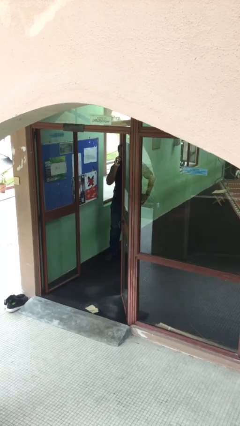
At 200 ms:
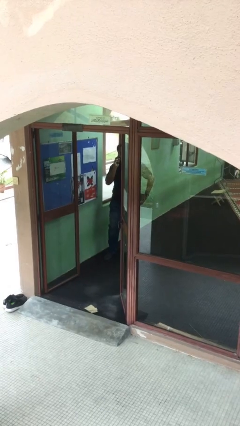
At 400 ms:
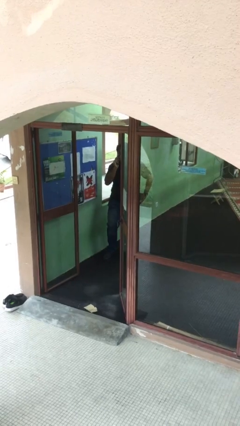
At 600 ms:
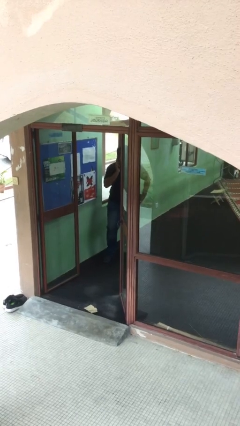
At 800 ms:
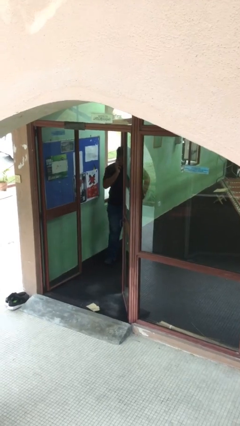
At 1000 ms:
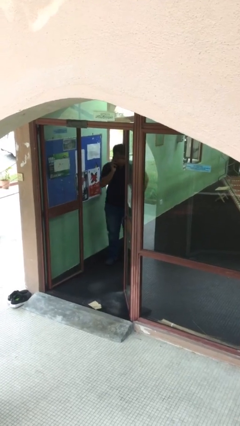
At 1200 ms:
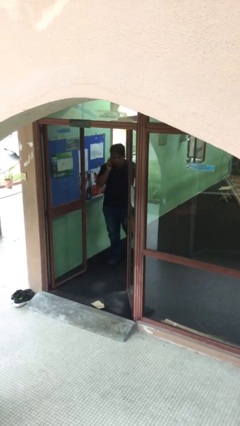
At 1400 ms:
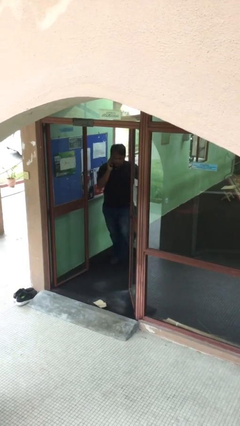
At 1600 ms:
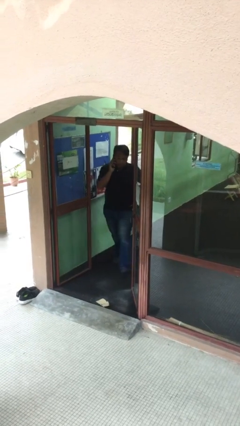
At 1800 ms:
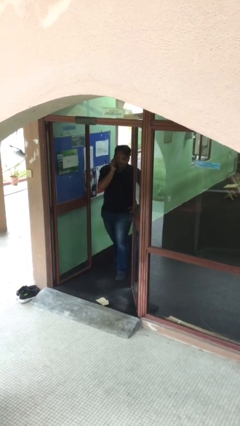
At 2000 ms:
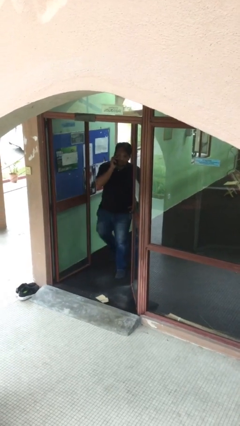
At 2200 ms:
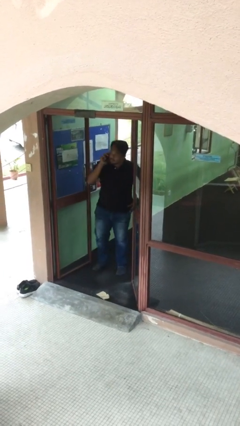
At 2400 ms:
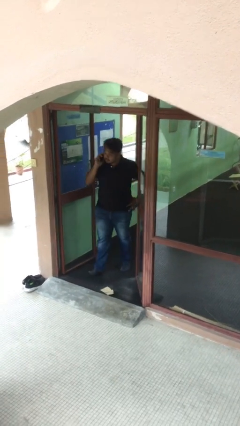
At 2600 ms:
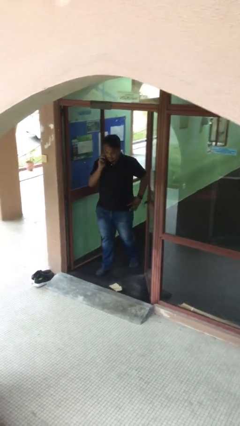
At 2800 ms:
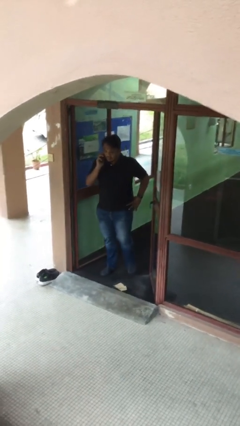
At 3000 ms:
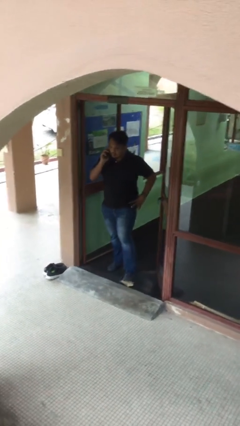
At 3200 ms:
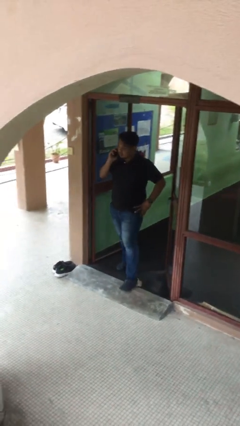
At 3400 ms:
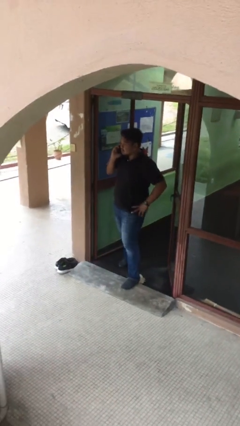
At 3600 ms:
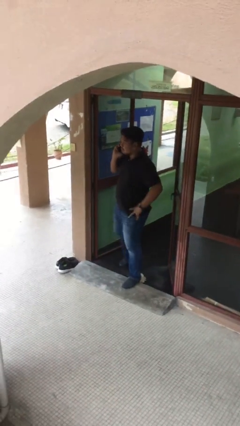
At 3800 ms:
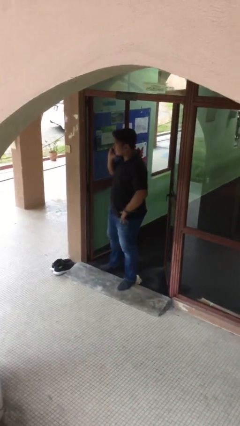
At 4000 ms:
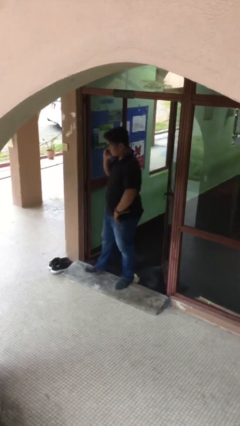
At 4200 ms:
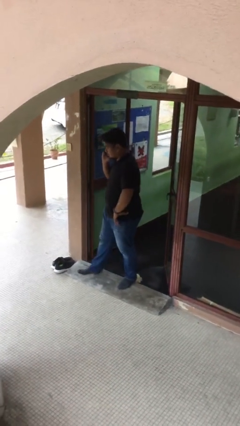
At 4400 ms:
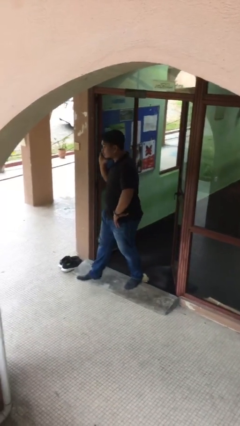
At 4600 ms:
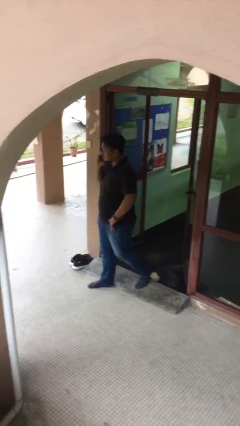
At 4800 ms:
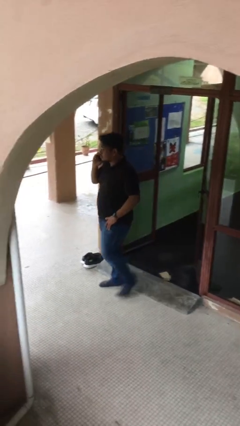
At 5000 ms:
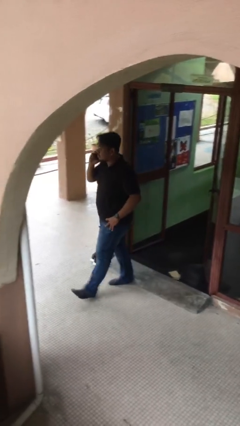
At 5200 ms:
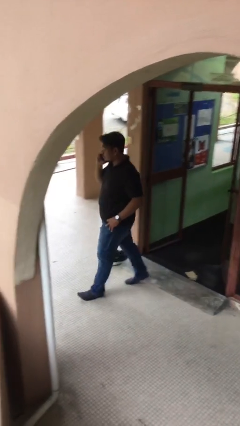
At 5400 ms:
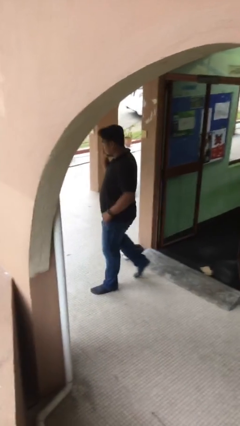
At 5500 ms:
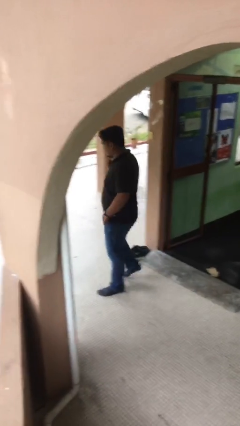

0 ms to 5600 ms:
person enters scene through structure

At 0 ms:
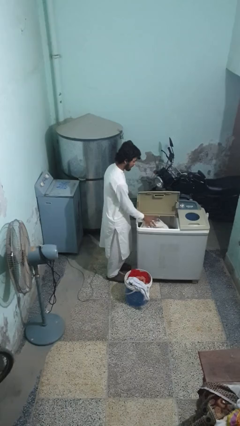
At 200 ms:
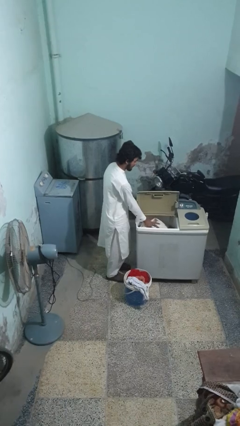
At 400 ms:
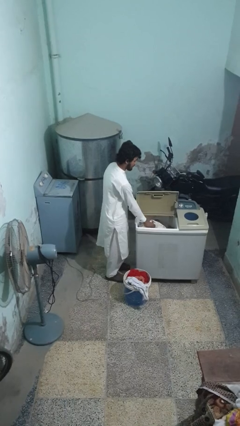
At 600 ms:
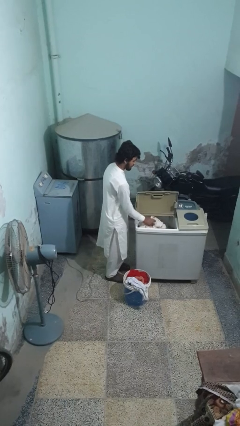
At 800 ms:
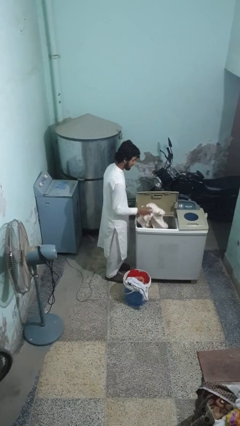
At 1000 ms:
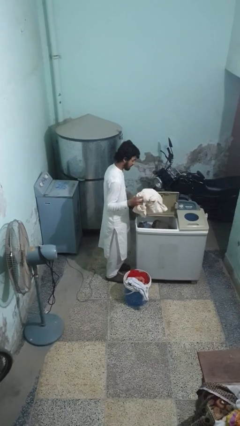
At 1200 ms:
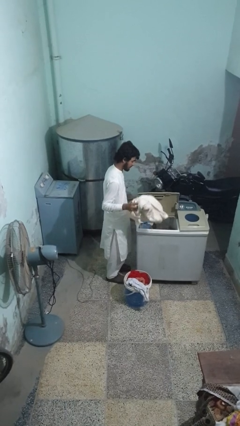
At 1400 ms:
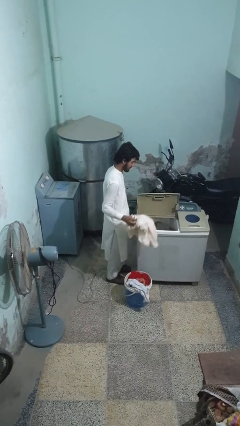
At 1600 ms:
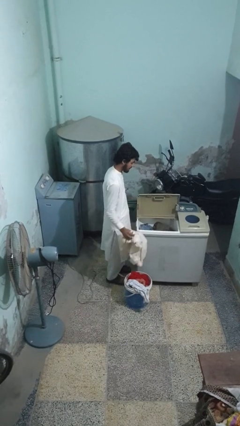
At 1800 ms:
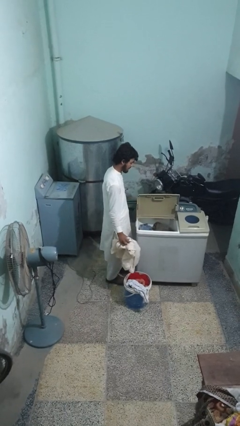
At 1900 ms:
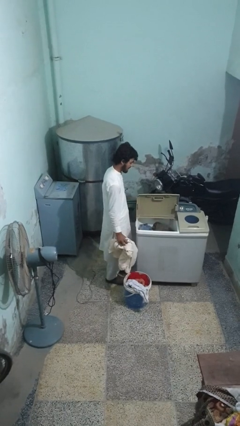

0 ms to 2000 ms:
person unloads clotheswasher

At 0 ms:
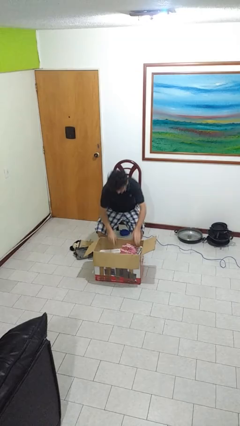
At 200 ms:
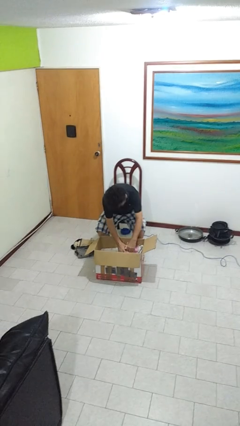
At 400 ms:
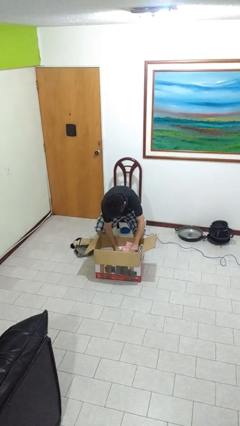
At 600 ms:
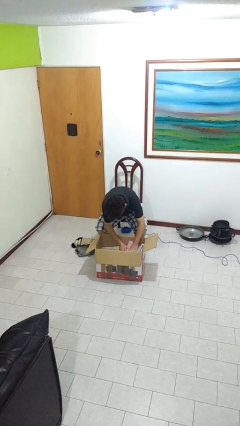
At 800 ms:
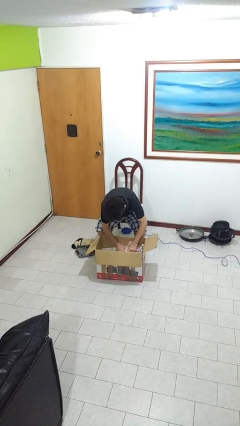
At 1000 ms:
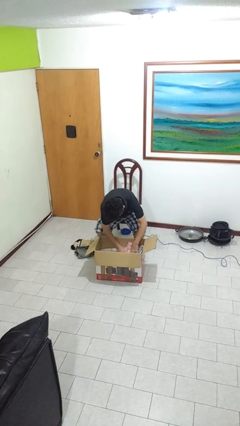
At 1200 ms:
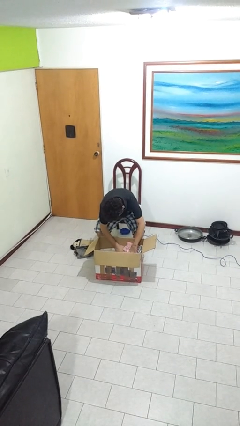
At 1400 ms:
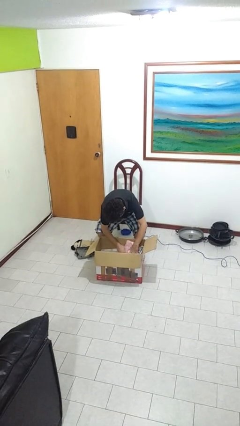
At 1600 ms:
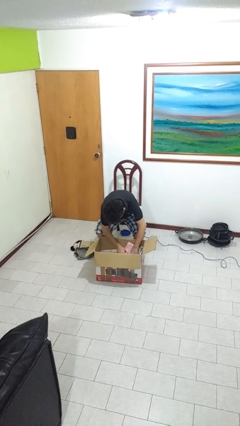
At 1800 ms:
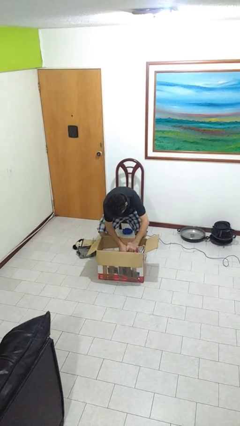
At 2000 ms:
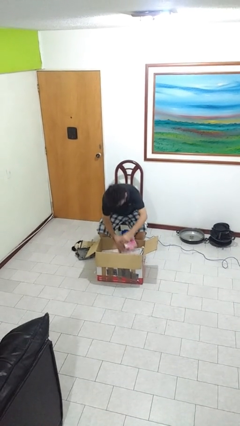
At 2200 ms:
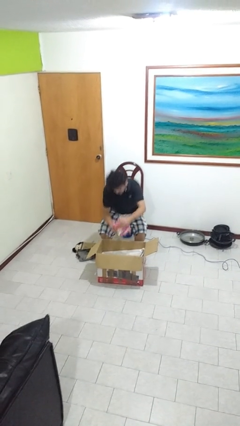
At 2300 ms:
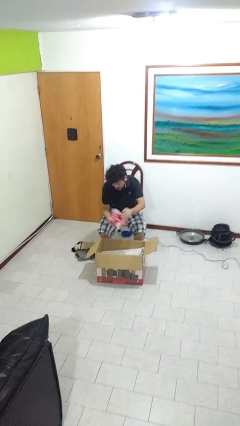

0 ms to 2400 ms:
person searches in box

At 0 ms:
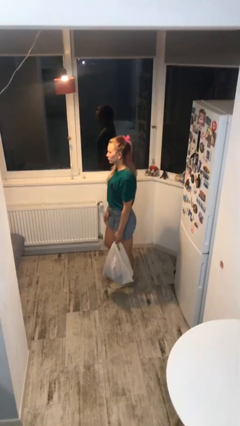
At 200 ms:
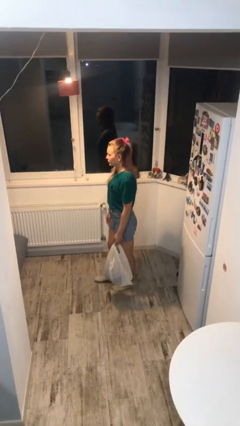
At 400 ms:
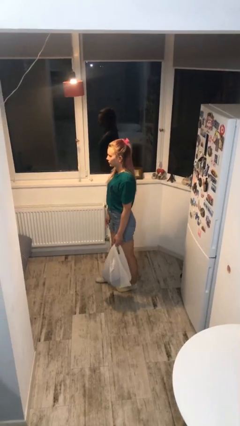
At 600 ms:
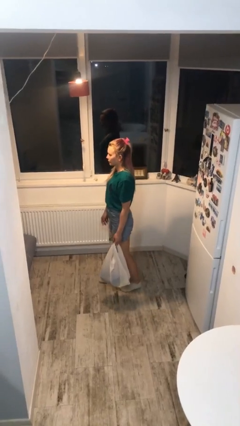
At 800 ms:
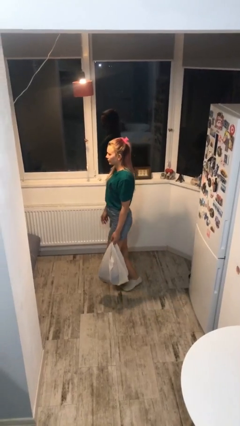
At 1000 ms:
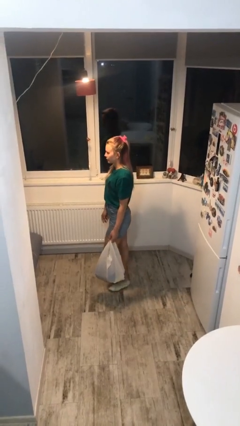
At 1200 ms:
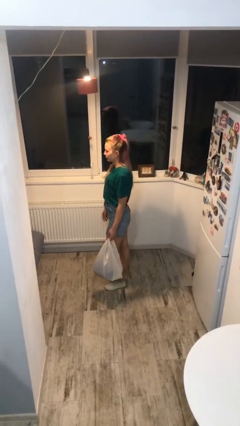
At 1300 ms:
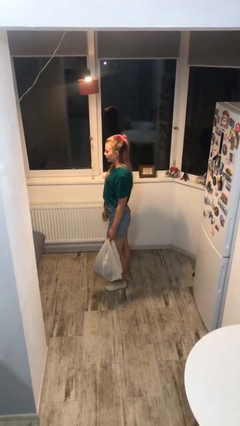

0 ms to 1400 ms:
person carries groceries

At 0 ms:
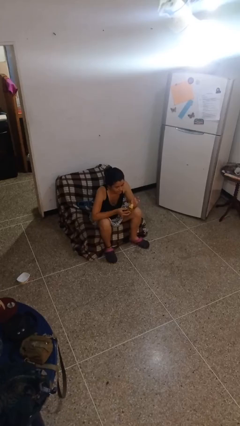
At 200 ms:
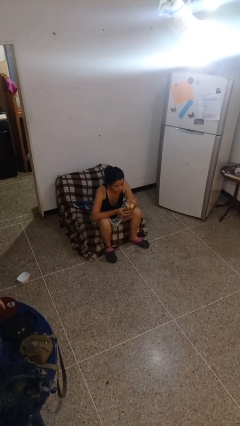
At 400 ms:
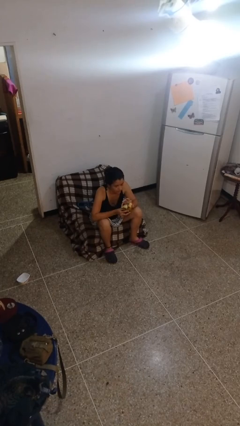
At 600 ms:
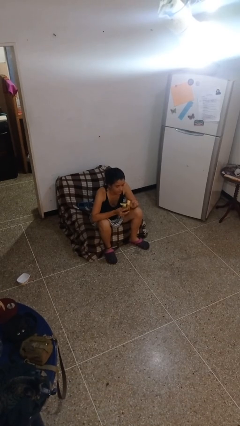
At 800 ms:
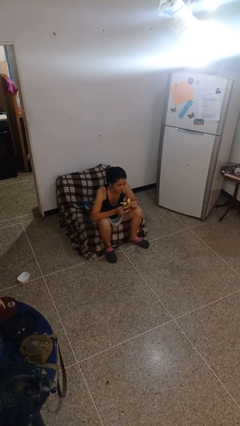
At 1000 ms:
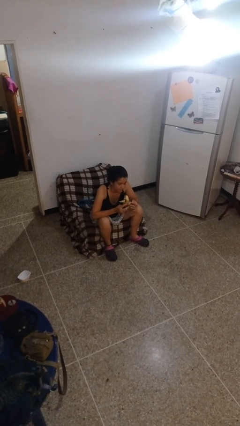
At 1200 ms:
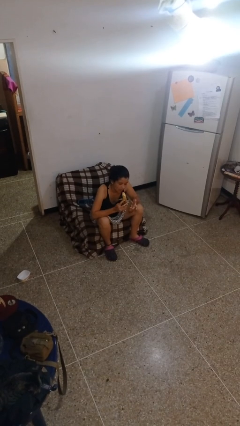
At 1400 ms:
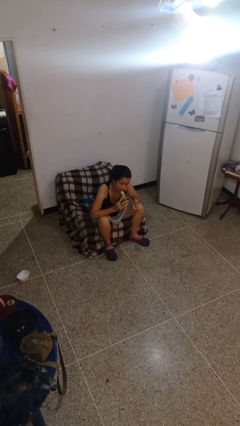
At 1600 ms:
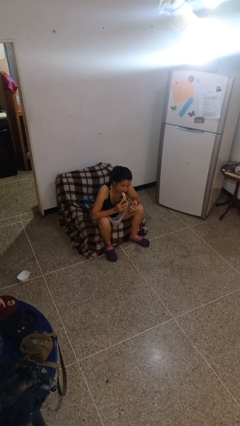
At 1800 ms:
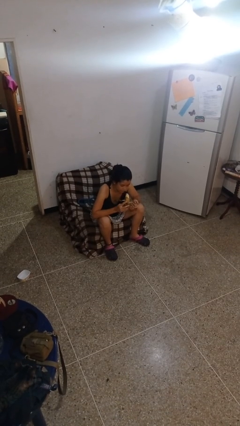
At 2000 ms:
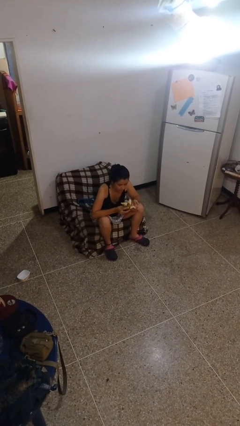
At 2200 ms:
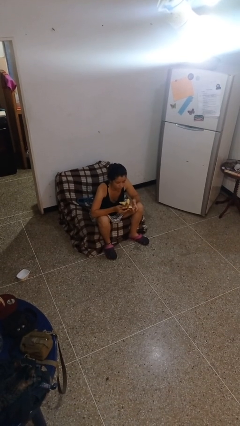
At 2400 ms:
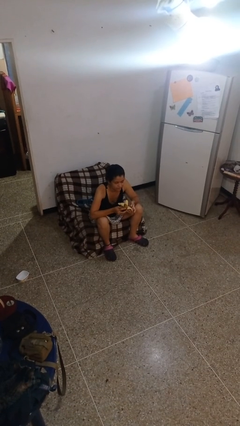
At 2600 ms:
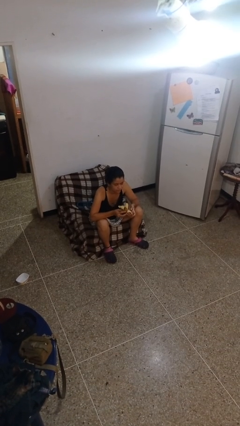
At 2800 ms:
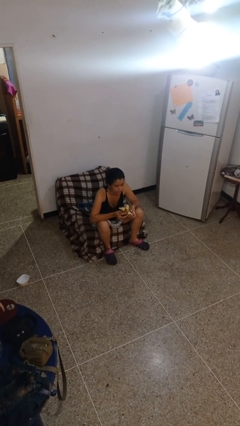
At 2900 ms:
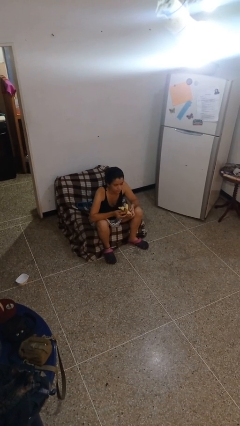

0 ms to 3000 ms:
person eats banana

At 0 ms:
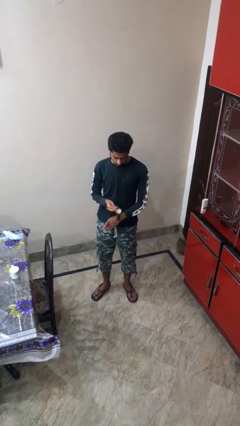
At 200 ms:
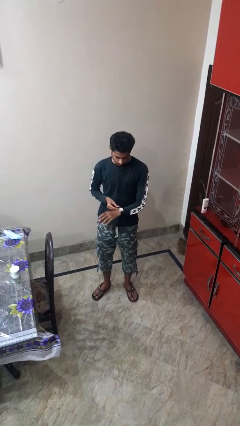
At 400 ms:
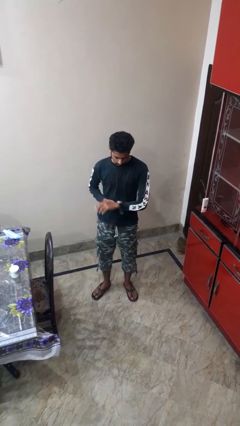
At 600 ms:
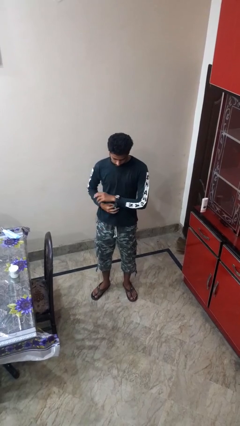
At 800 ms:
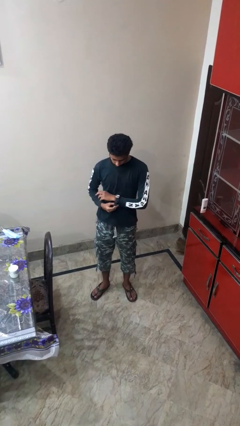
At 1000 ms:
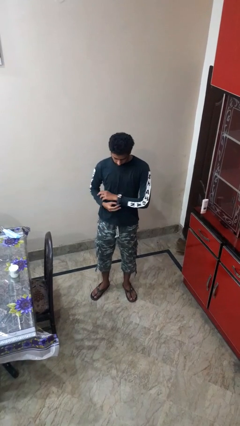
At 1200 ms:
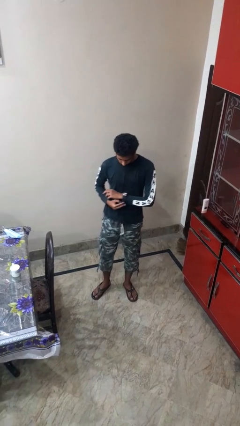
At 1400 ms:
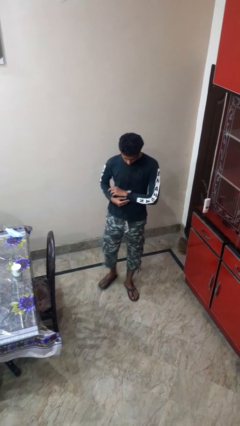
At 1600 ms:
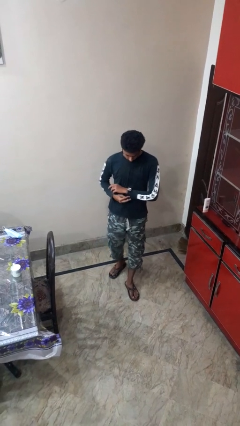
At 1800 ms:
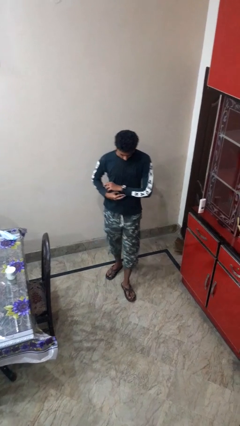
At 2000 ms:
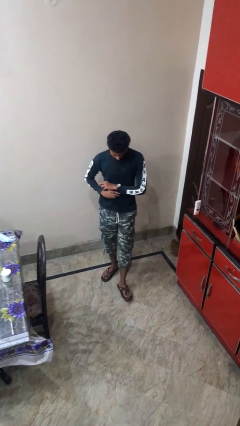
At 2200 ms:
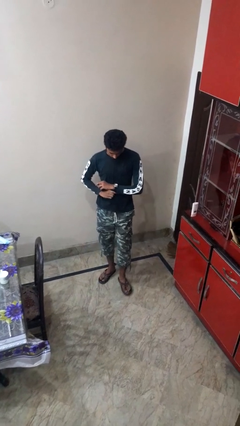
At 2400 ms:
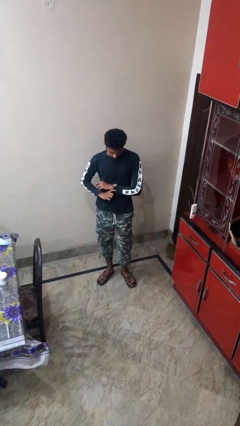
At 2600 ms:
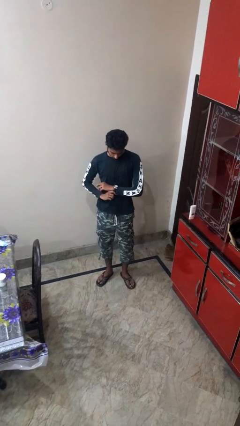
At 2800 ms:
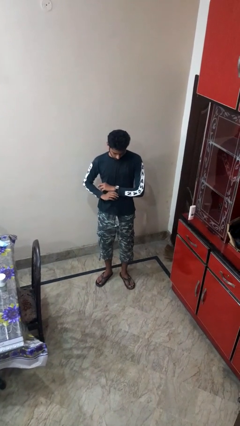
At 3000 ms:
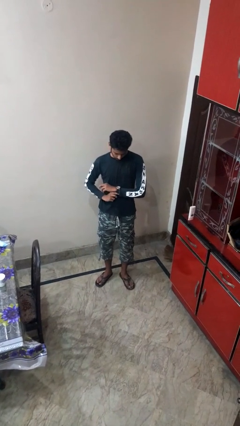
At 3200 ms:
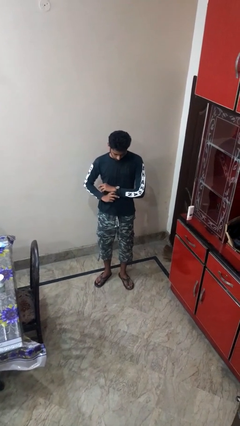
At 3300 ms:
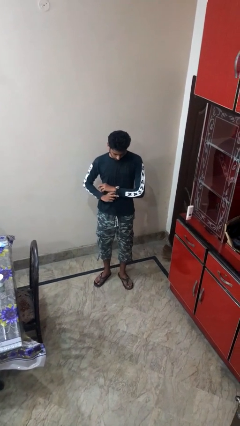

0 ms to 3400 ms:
person puts on wristwatch
